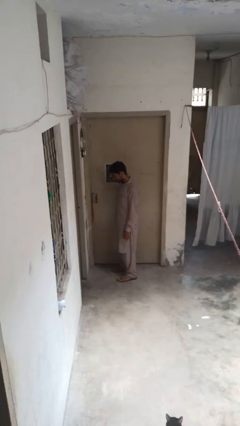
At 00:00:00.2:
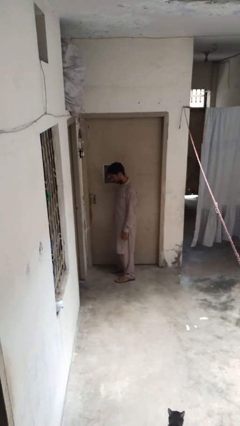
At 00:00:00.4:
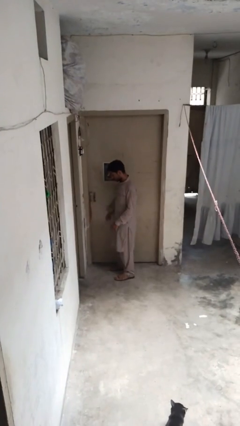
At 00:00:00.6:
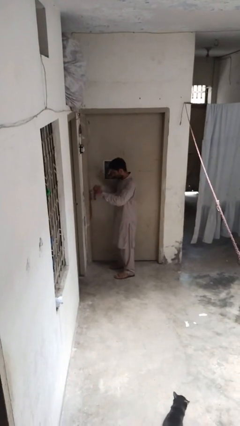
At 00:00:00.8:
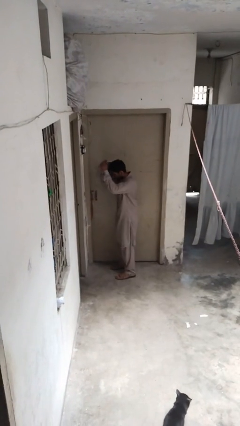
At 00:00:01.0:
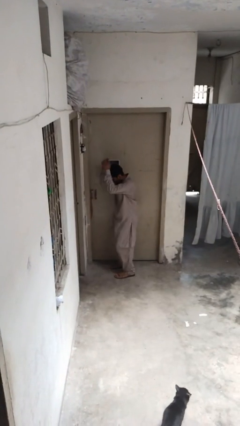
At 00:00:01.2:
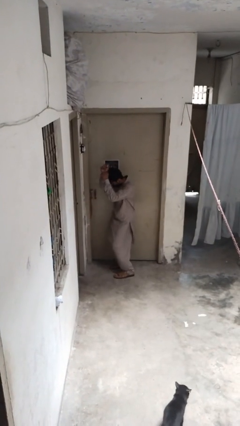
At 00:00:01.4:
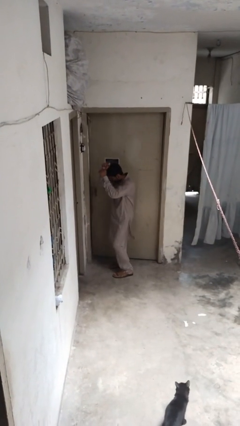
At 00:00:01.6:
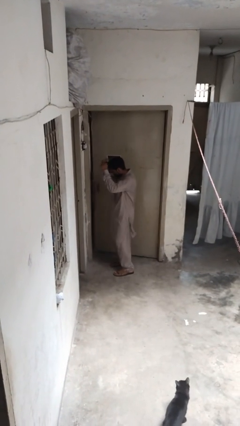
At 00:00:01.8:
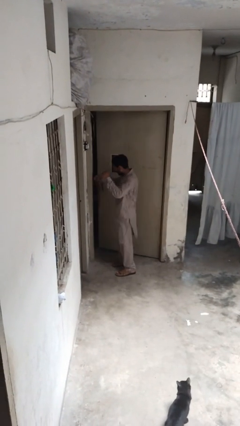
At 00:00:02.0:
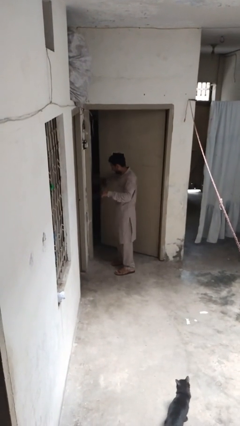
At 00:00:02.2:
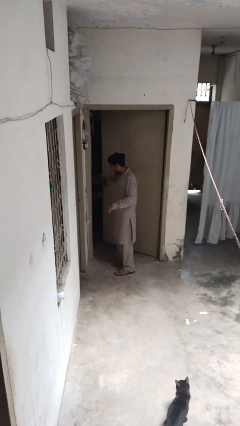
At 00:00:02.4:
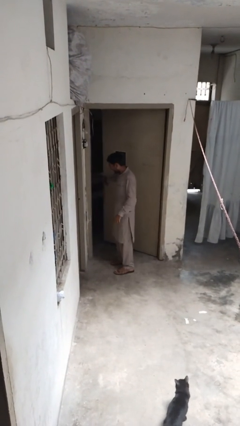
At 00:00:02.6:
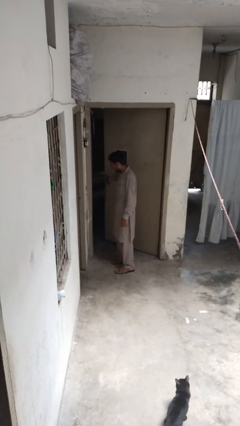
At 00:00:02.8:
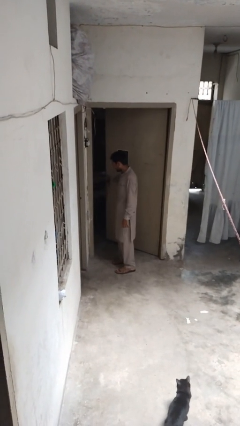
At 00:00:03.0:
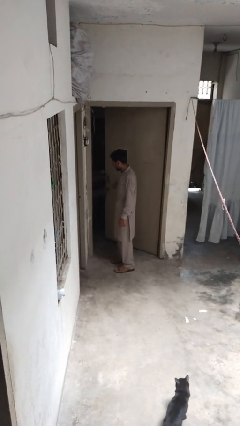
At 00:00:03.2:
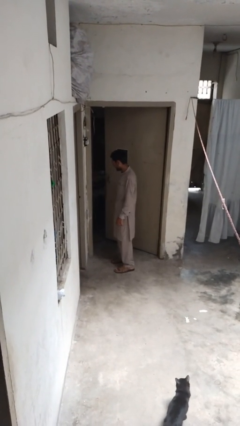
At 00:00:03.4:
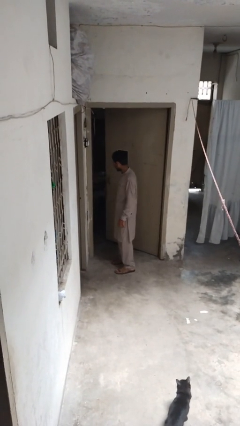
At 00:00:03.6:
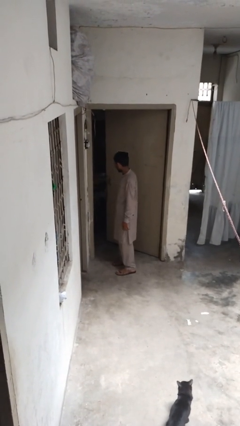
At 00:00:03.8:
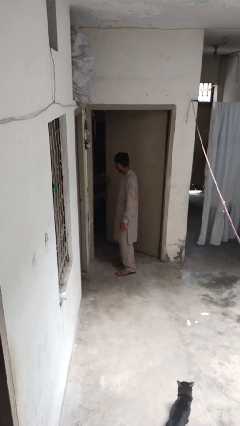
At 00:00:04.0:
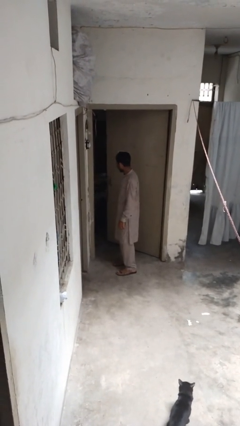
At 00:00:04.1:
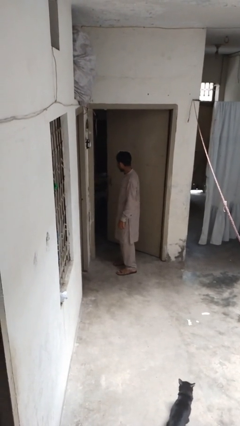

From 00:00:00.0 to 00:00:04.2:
person opens facility door

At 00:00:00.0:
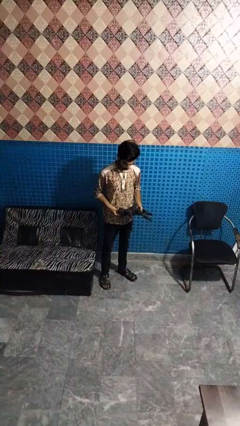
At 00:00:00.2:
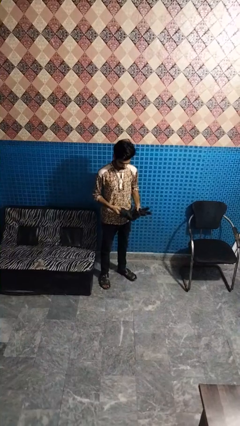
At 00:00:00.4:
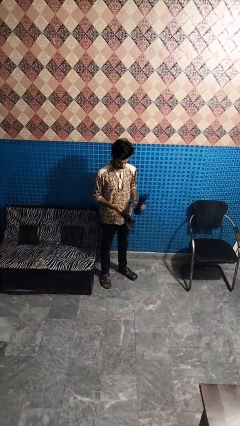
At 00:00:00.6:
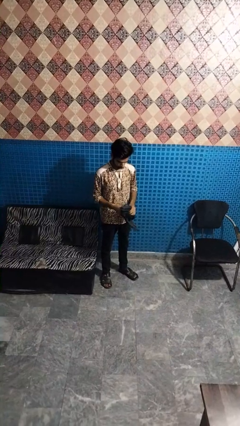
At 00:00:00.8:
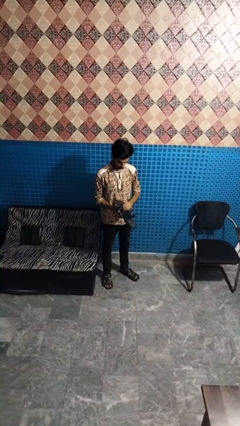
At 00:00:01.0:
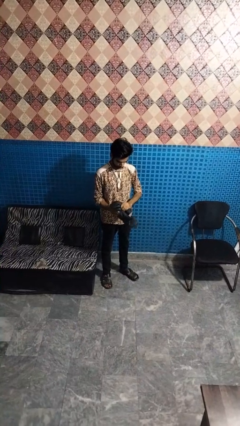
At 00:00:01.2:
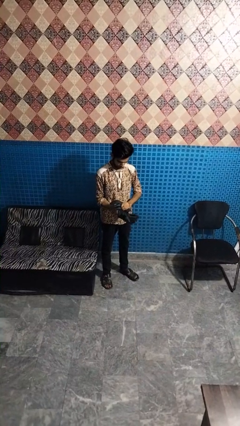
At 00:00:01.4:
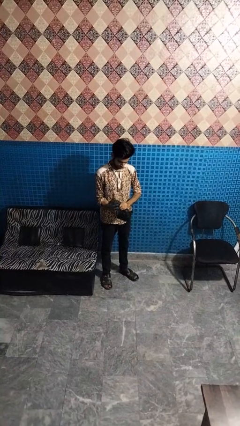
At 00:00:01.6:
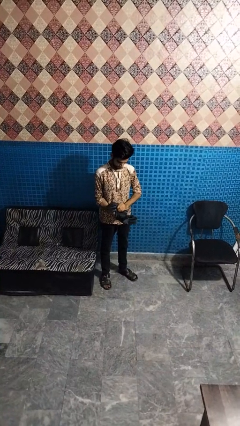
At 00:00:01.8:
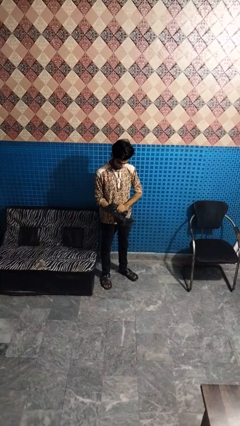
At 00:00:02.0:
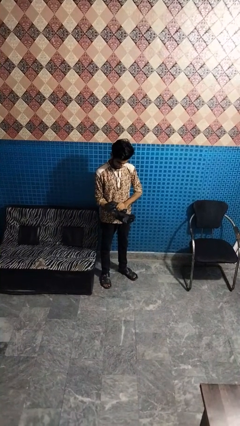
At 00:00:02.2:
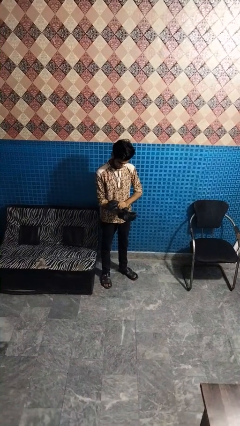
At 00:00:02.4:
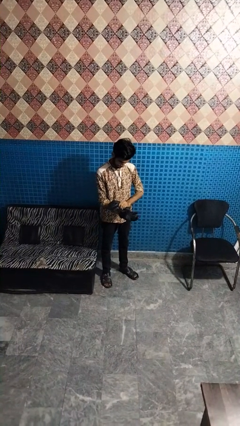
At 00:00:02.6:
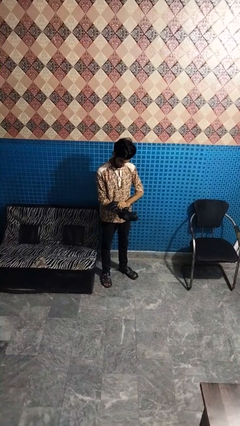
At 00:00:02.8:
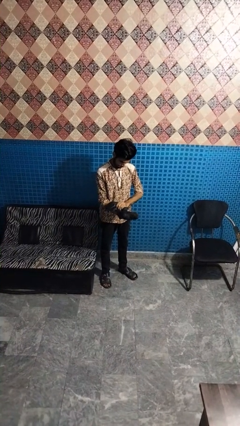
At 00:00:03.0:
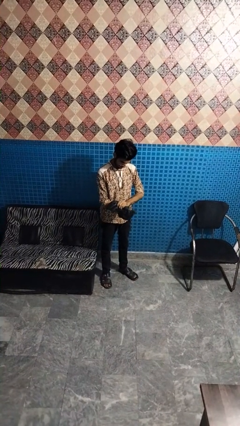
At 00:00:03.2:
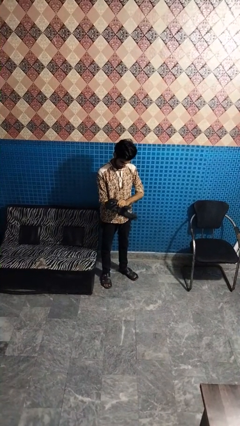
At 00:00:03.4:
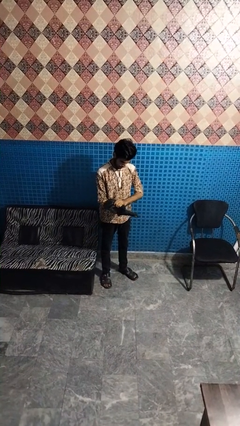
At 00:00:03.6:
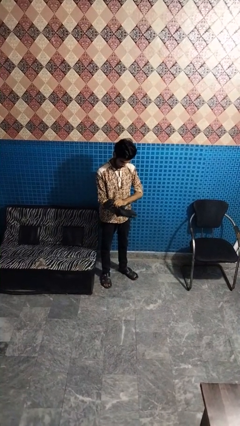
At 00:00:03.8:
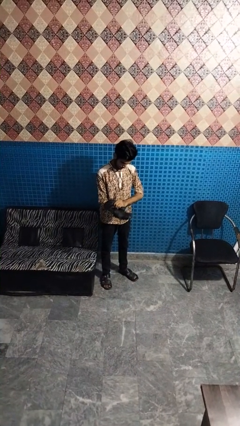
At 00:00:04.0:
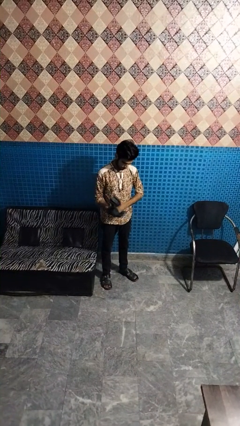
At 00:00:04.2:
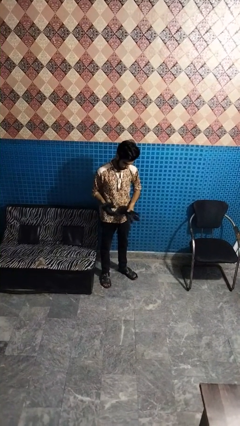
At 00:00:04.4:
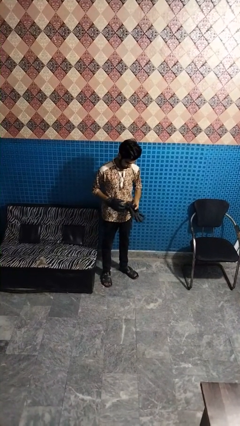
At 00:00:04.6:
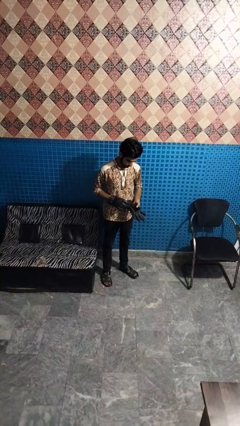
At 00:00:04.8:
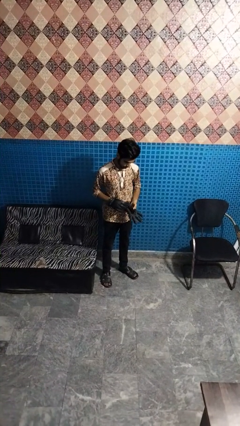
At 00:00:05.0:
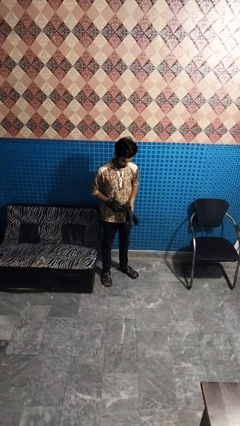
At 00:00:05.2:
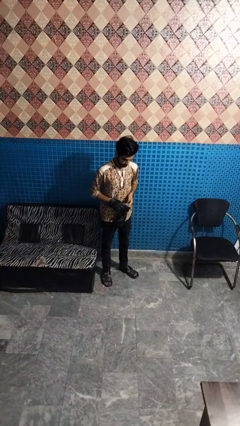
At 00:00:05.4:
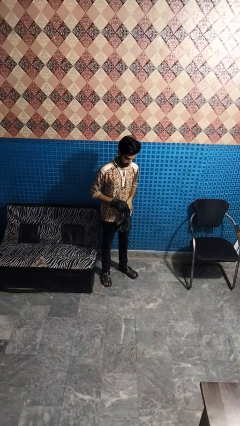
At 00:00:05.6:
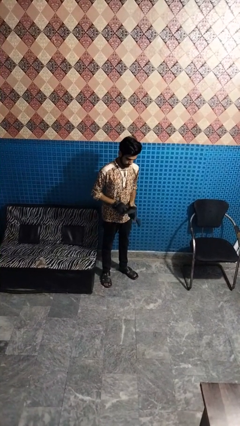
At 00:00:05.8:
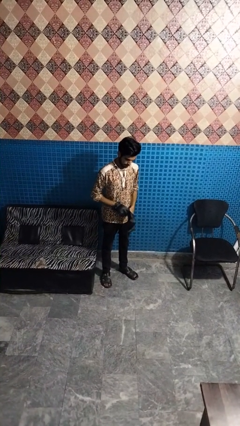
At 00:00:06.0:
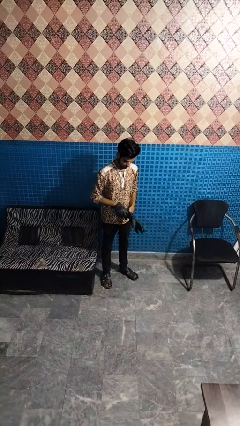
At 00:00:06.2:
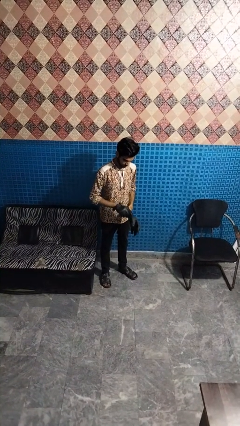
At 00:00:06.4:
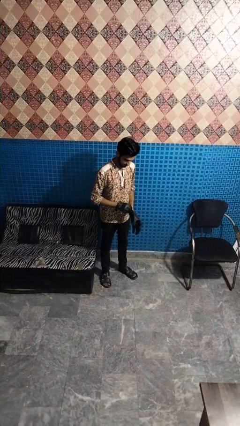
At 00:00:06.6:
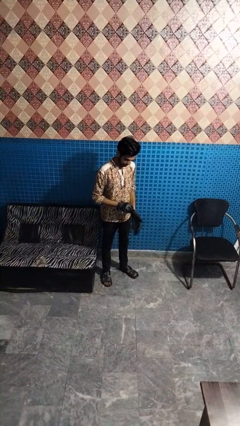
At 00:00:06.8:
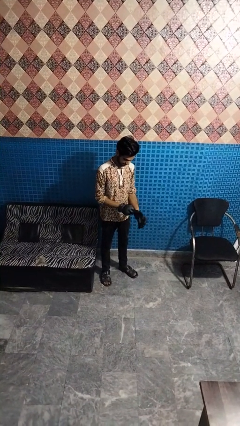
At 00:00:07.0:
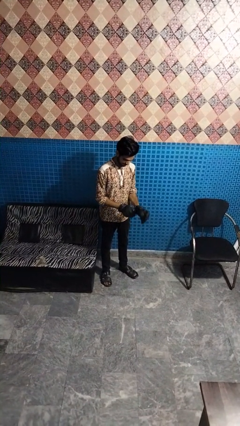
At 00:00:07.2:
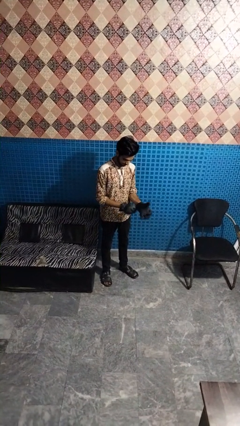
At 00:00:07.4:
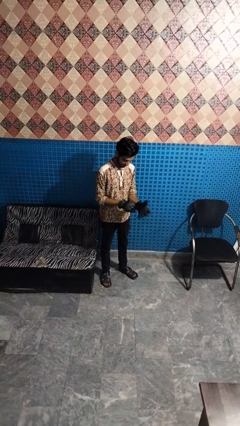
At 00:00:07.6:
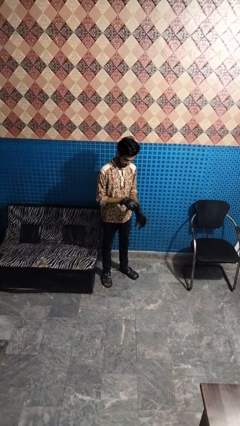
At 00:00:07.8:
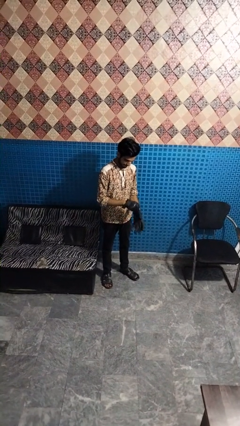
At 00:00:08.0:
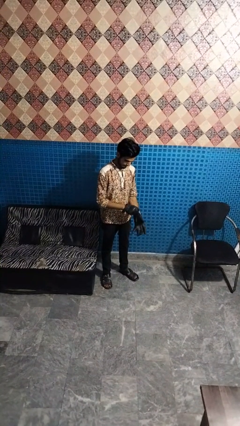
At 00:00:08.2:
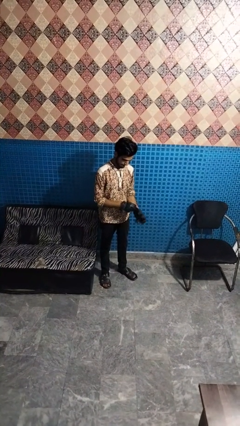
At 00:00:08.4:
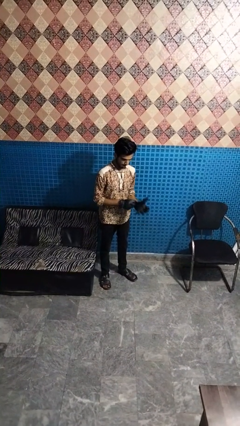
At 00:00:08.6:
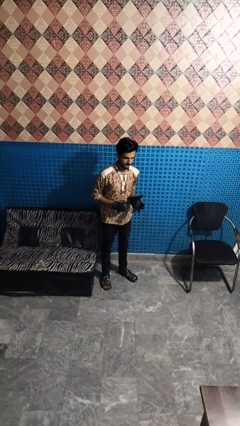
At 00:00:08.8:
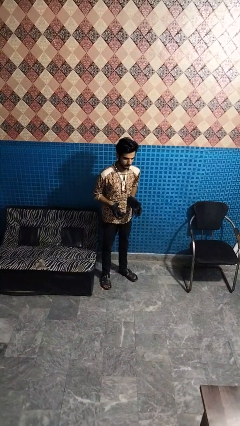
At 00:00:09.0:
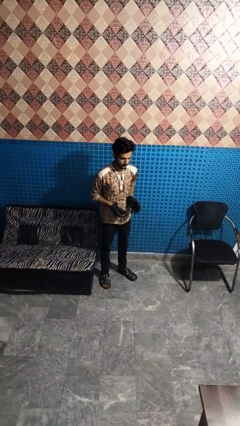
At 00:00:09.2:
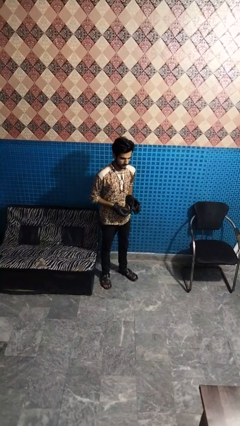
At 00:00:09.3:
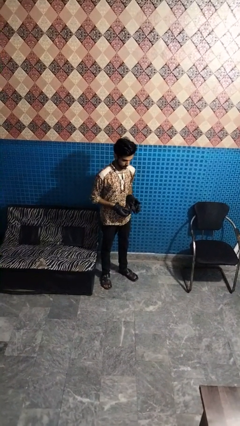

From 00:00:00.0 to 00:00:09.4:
person puts on gloves

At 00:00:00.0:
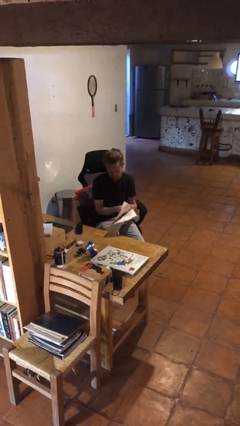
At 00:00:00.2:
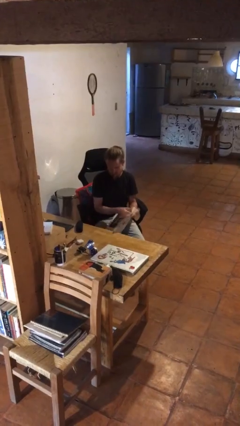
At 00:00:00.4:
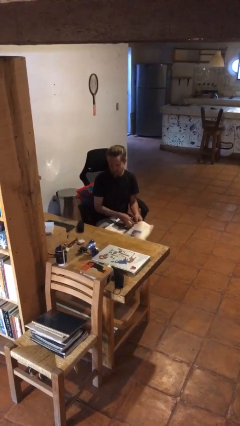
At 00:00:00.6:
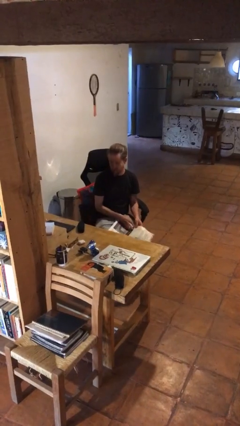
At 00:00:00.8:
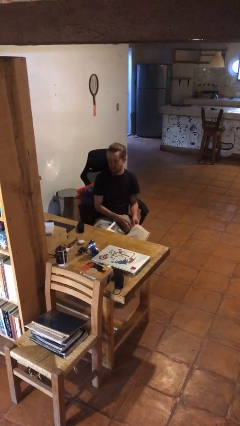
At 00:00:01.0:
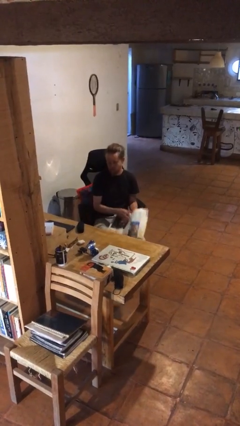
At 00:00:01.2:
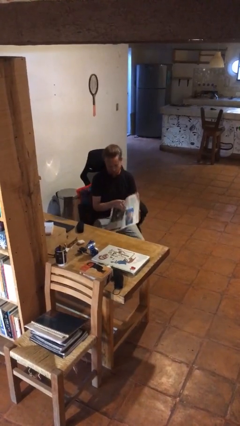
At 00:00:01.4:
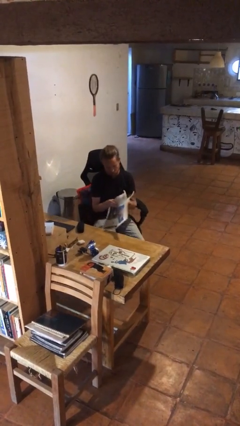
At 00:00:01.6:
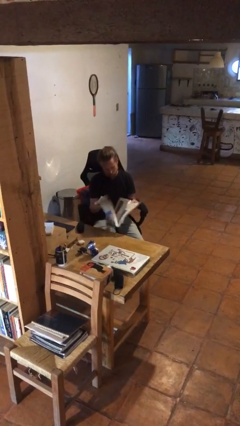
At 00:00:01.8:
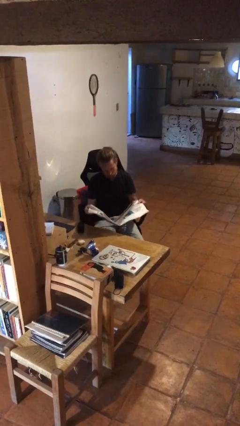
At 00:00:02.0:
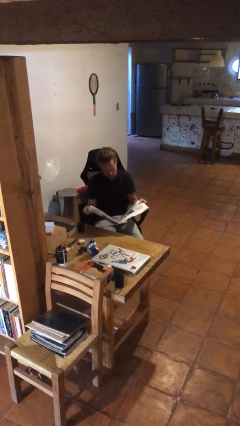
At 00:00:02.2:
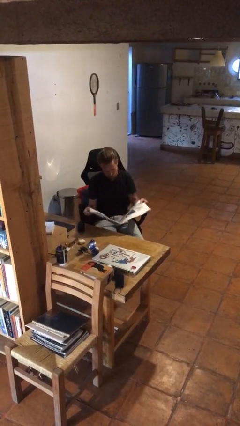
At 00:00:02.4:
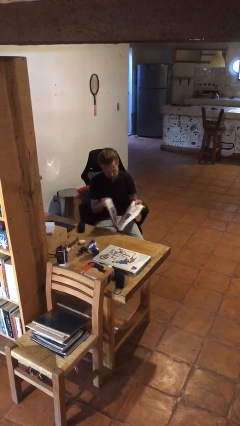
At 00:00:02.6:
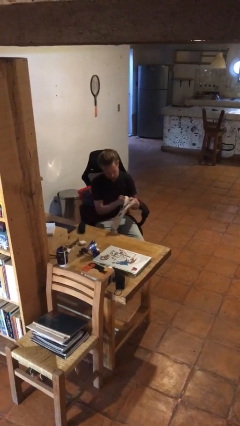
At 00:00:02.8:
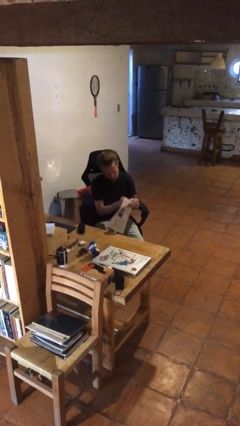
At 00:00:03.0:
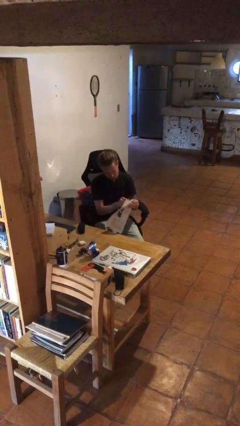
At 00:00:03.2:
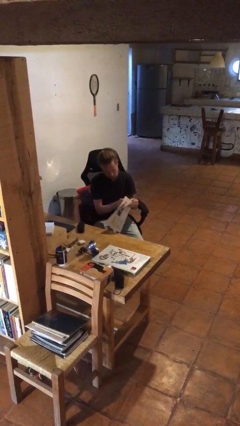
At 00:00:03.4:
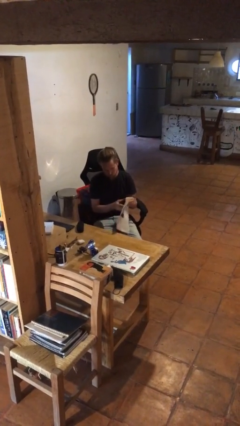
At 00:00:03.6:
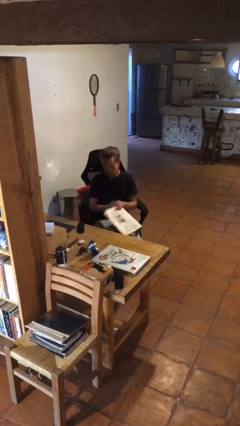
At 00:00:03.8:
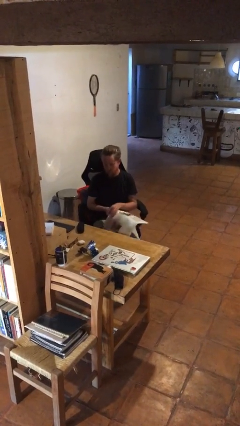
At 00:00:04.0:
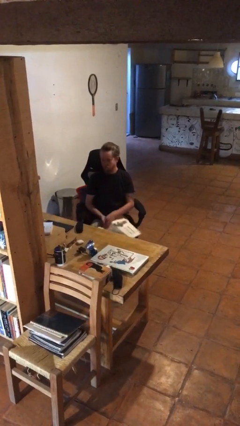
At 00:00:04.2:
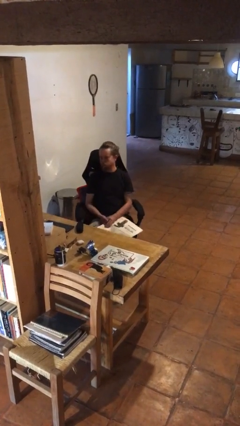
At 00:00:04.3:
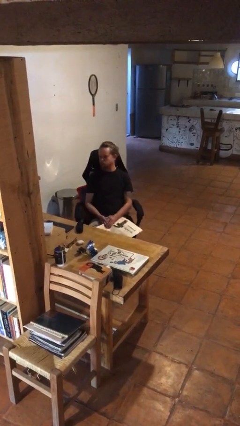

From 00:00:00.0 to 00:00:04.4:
person reads newspaper
